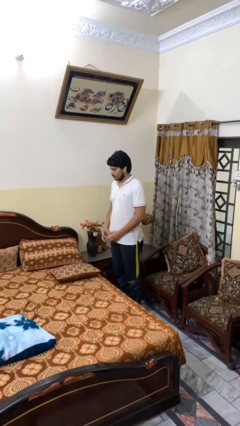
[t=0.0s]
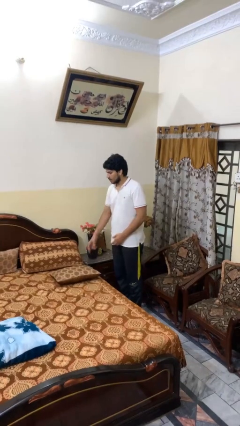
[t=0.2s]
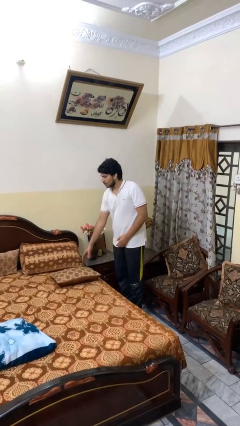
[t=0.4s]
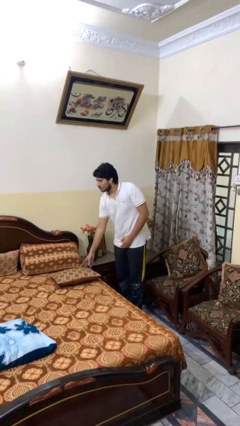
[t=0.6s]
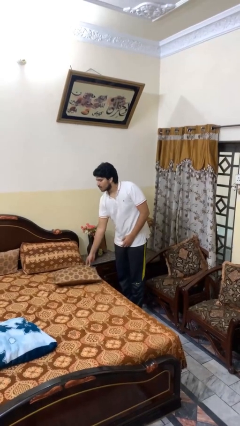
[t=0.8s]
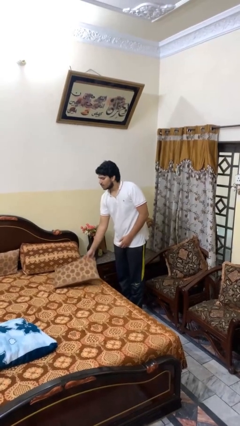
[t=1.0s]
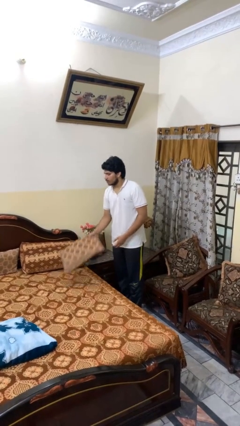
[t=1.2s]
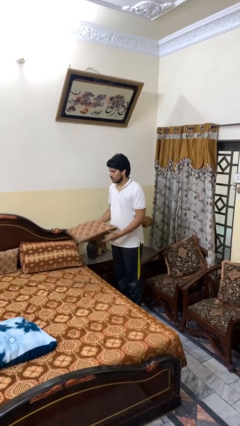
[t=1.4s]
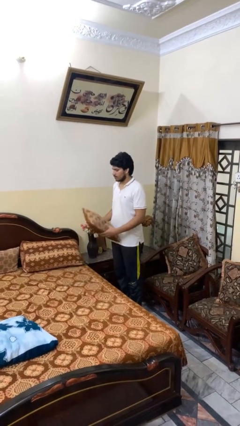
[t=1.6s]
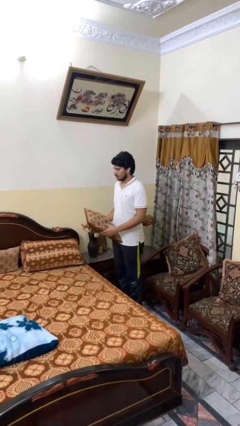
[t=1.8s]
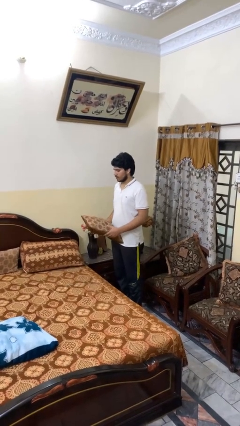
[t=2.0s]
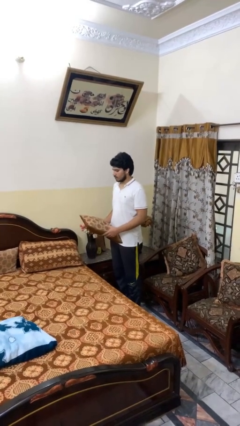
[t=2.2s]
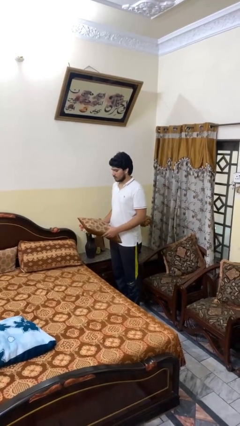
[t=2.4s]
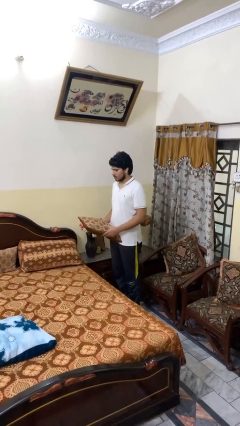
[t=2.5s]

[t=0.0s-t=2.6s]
person picks up object from bed

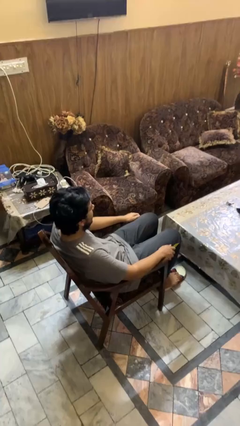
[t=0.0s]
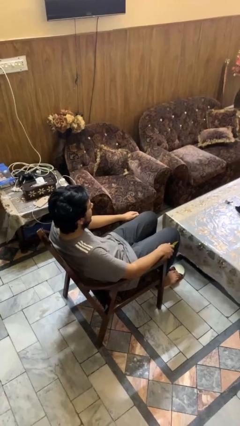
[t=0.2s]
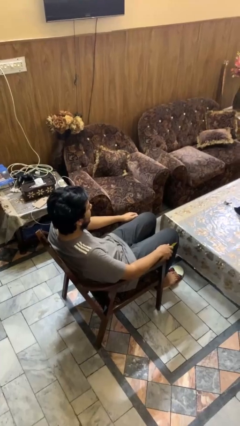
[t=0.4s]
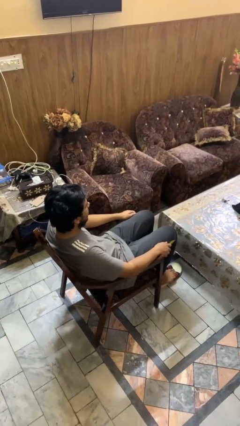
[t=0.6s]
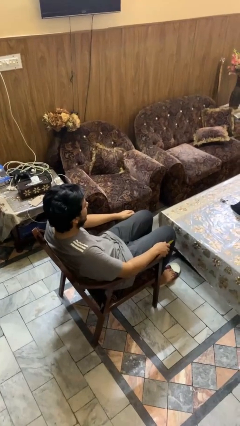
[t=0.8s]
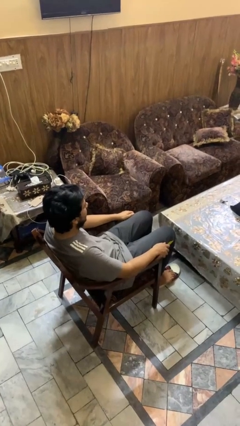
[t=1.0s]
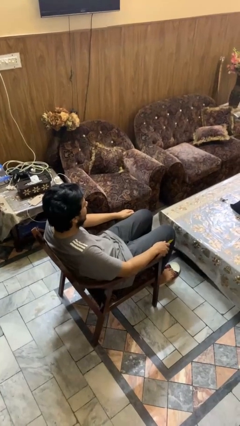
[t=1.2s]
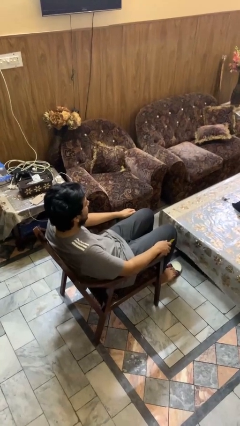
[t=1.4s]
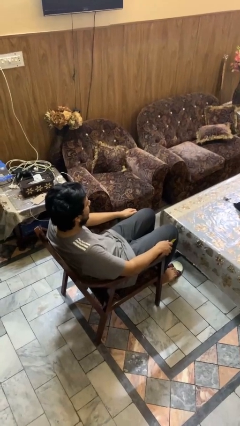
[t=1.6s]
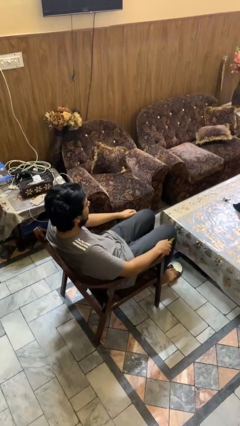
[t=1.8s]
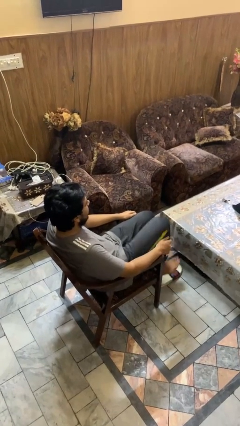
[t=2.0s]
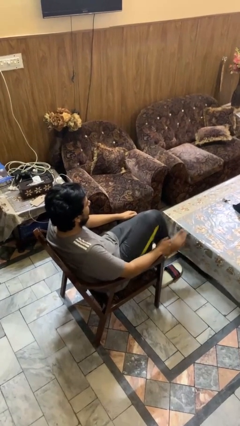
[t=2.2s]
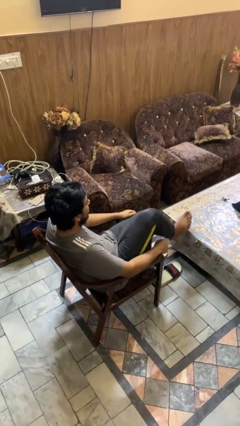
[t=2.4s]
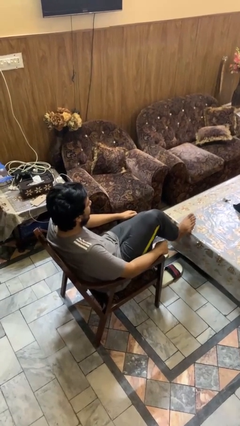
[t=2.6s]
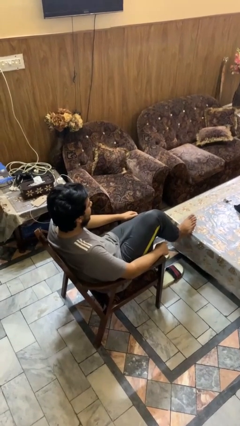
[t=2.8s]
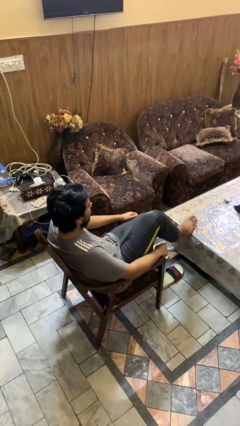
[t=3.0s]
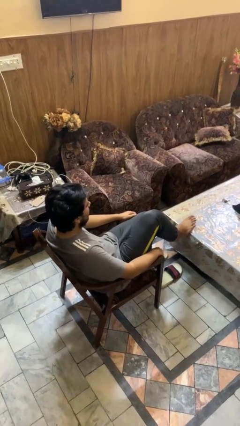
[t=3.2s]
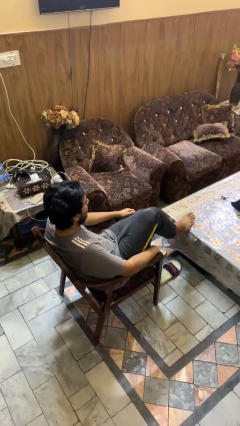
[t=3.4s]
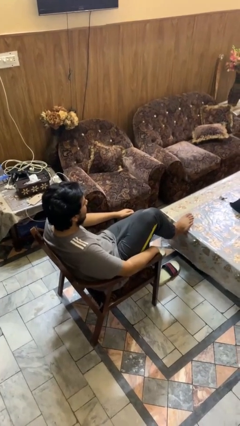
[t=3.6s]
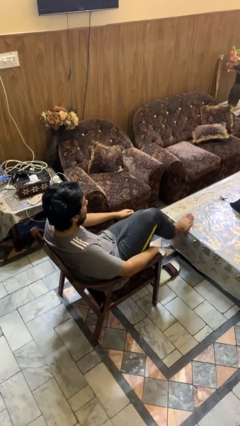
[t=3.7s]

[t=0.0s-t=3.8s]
person puts feet up

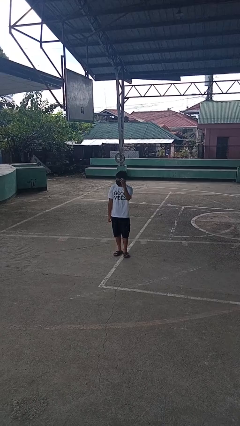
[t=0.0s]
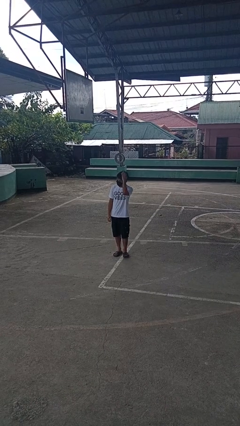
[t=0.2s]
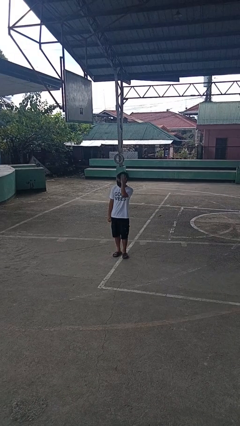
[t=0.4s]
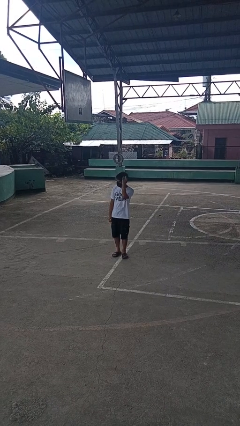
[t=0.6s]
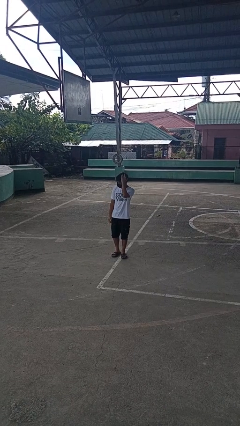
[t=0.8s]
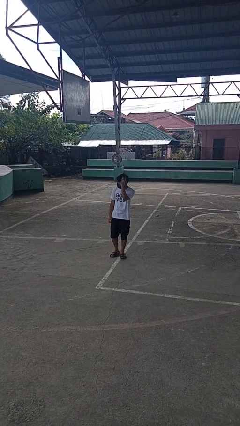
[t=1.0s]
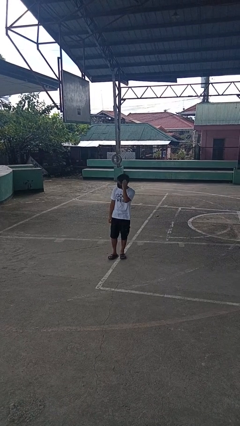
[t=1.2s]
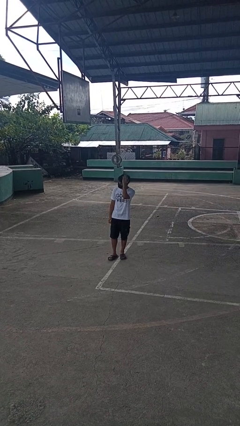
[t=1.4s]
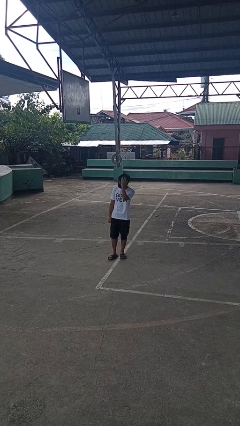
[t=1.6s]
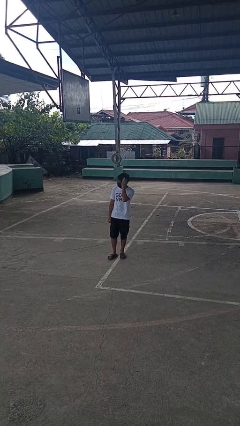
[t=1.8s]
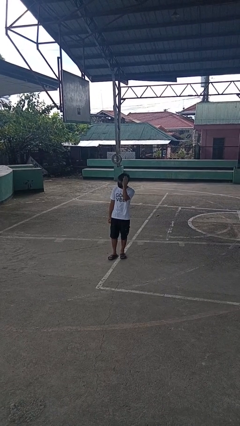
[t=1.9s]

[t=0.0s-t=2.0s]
person pats head

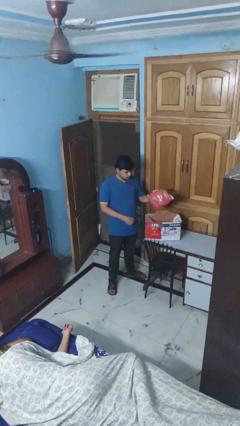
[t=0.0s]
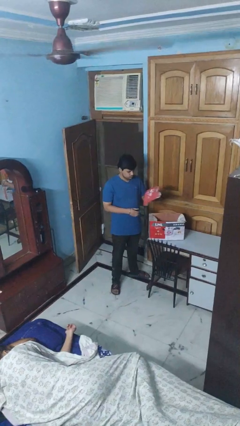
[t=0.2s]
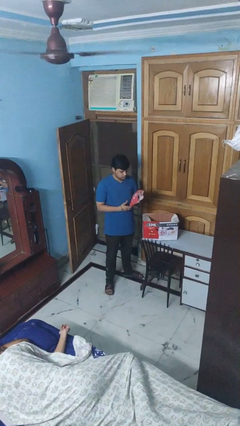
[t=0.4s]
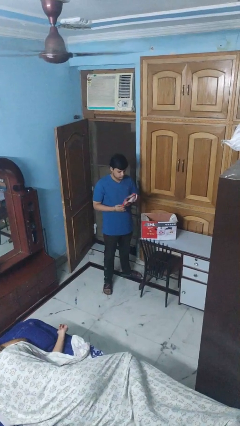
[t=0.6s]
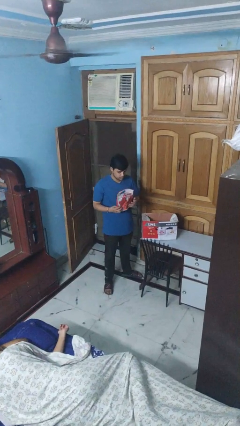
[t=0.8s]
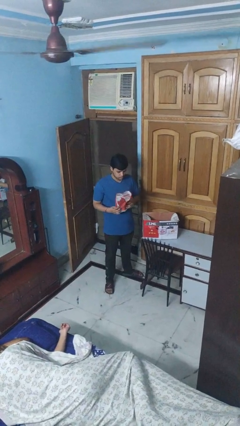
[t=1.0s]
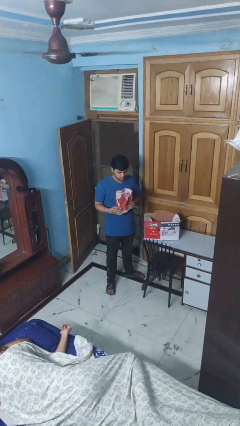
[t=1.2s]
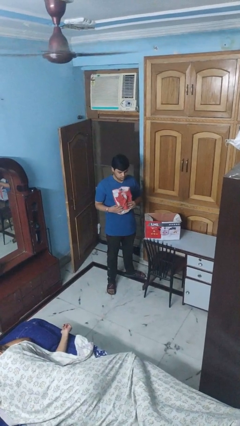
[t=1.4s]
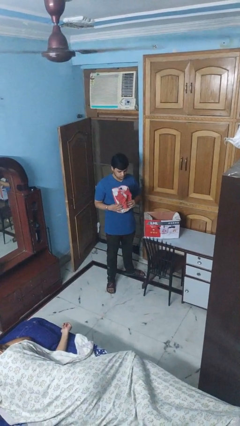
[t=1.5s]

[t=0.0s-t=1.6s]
person takes object from box

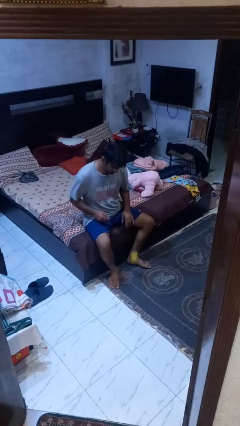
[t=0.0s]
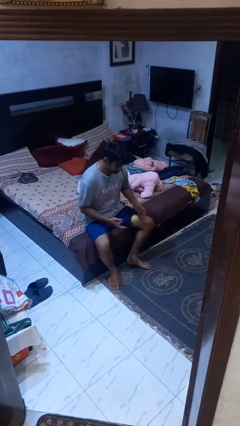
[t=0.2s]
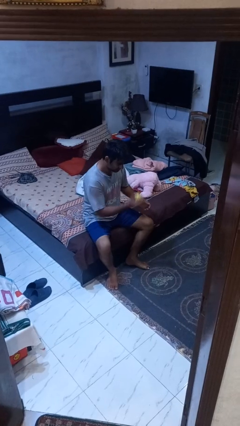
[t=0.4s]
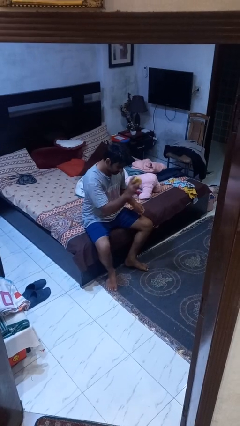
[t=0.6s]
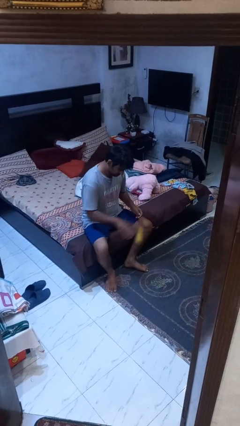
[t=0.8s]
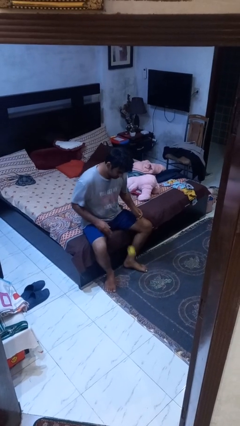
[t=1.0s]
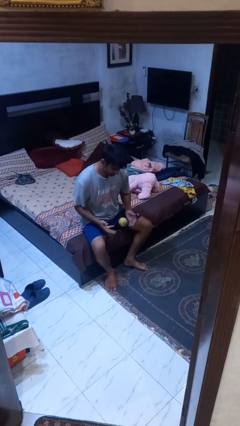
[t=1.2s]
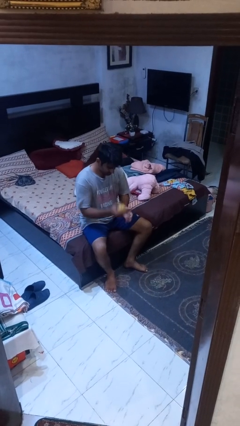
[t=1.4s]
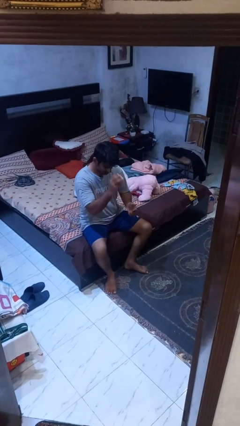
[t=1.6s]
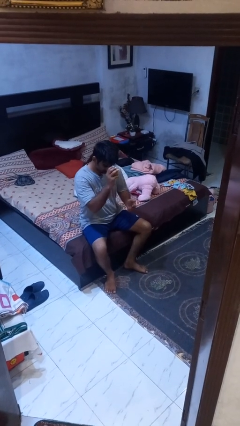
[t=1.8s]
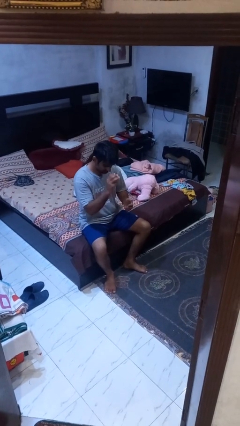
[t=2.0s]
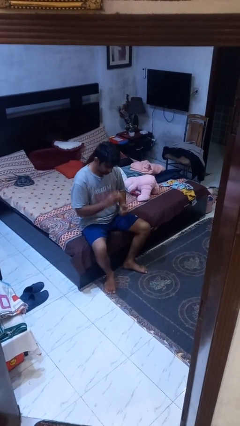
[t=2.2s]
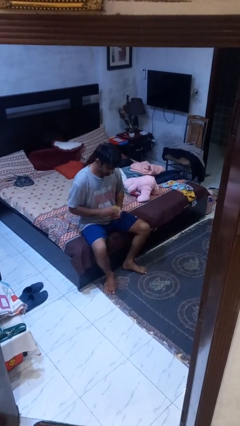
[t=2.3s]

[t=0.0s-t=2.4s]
person bounces ball on floor

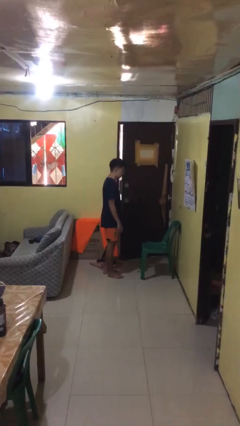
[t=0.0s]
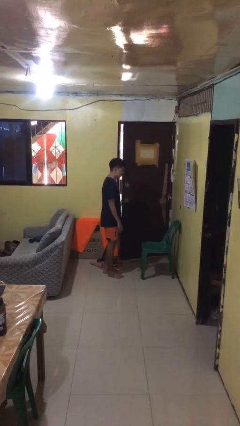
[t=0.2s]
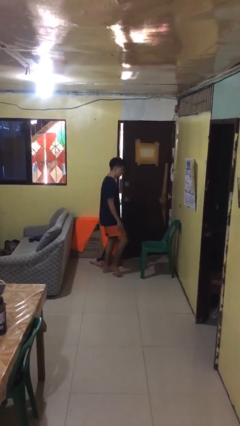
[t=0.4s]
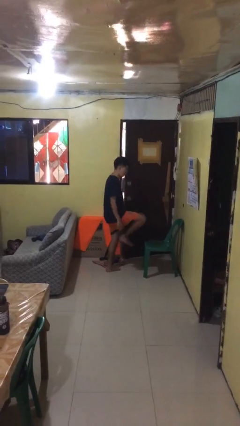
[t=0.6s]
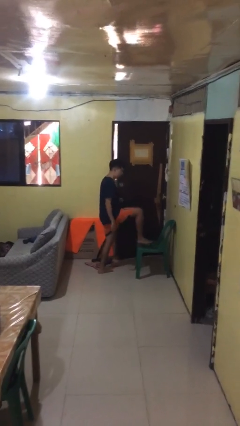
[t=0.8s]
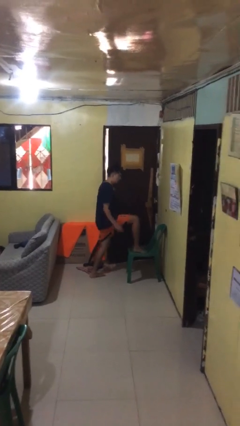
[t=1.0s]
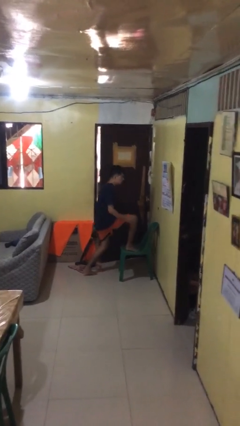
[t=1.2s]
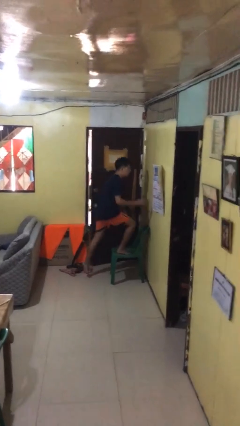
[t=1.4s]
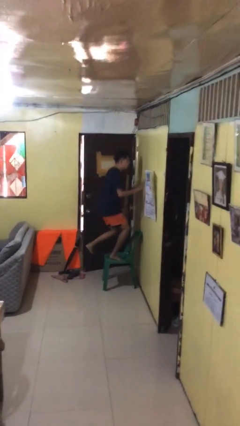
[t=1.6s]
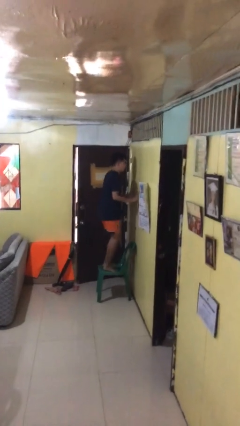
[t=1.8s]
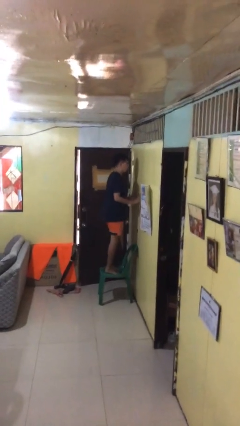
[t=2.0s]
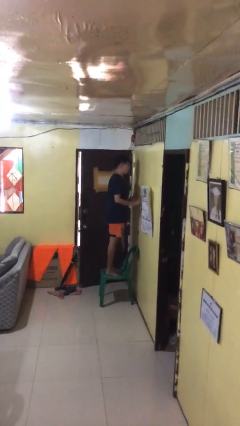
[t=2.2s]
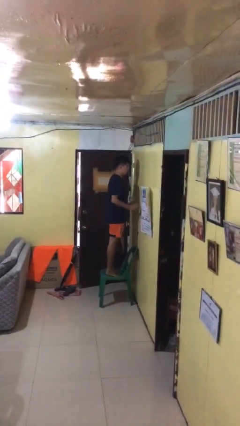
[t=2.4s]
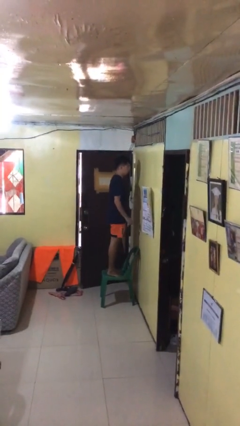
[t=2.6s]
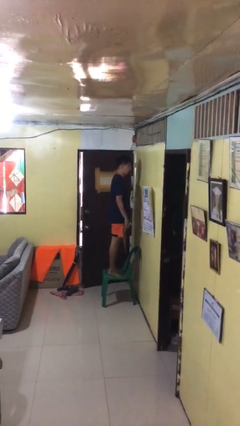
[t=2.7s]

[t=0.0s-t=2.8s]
person climbs on chair

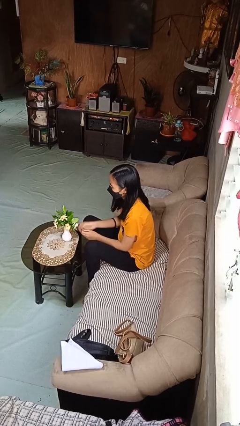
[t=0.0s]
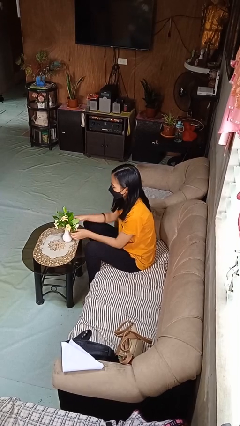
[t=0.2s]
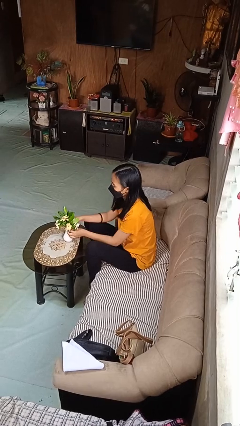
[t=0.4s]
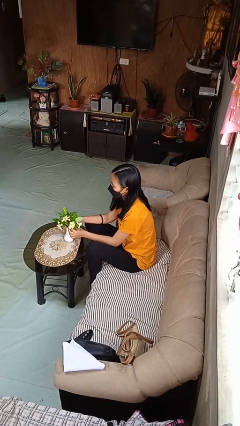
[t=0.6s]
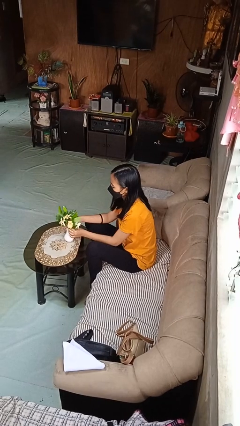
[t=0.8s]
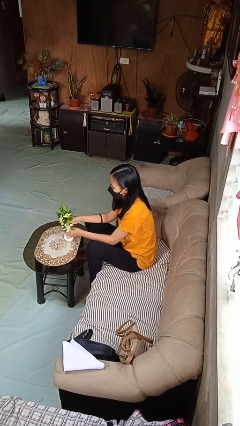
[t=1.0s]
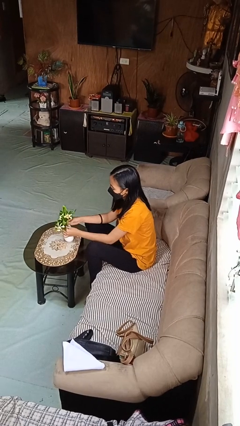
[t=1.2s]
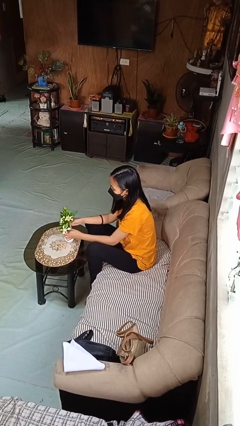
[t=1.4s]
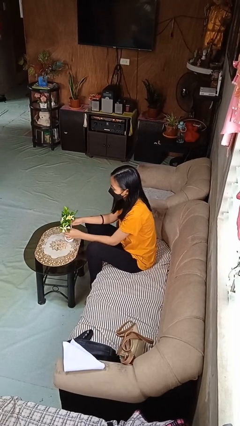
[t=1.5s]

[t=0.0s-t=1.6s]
person arranges flowers in vase
